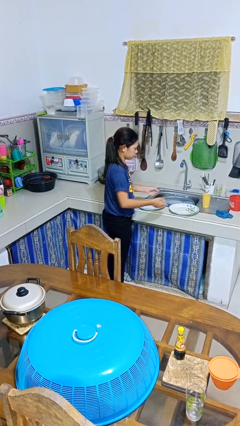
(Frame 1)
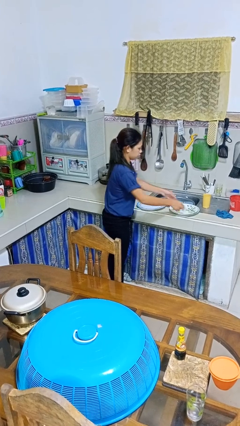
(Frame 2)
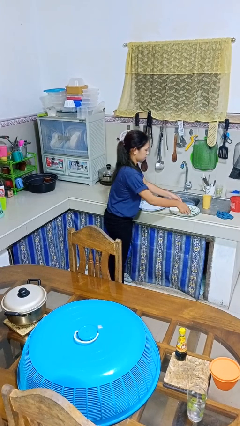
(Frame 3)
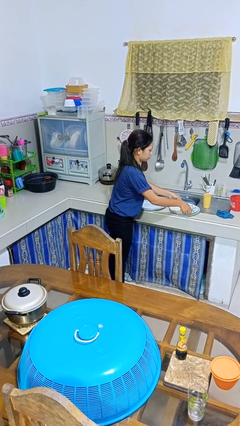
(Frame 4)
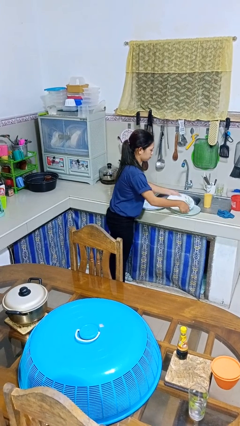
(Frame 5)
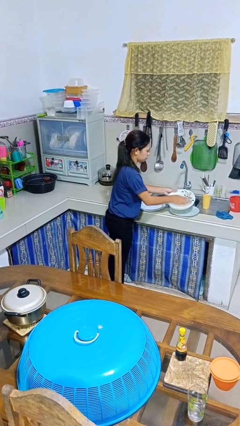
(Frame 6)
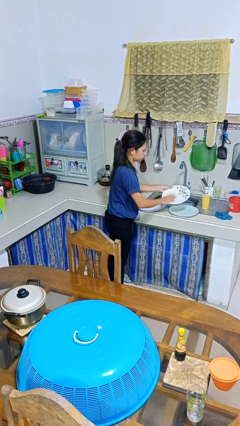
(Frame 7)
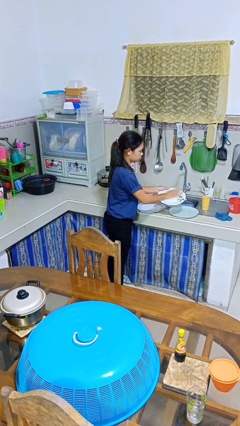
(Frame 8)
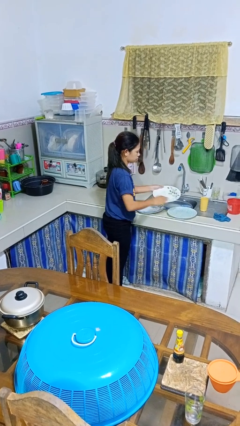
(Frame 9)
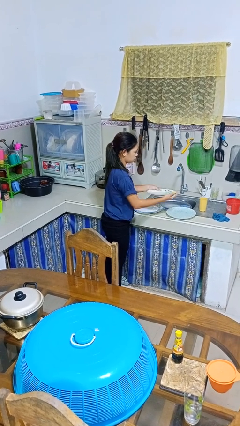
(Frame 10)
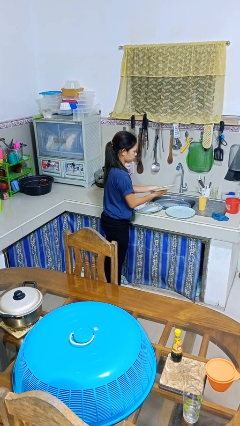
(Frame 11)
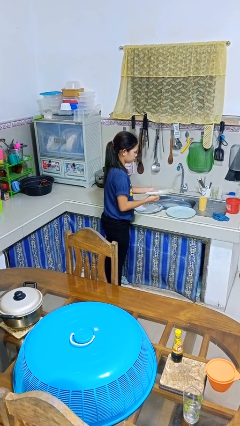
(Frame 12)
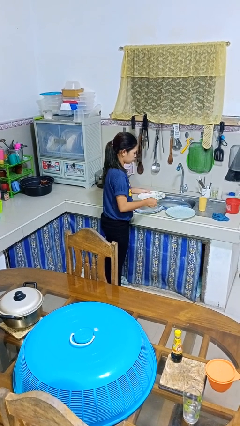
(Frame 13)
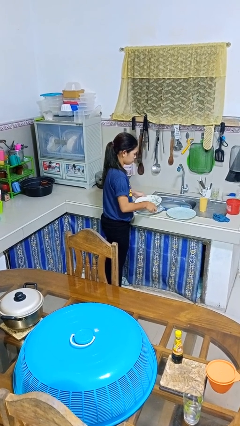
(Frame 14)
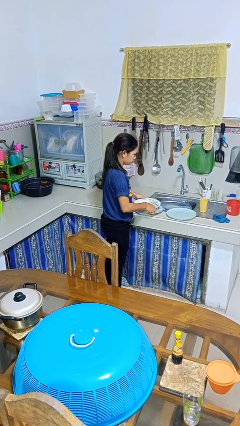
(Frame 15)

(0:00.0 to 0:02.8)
person washes dish

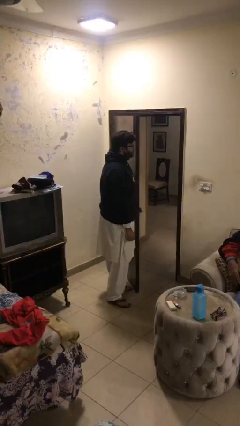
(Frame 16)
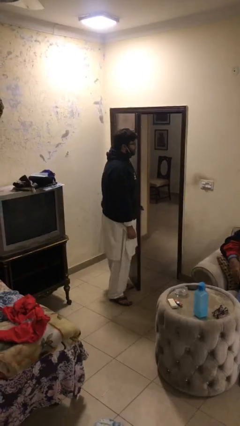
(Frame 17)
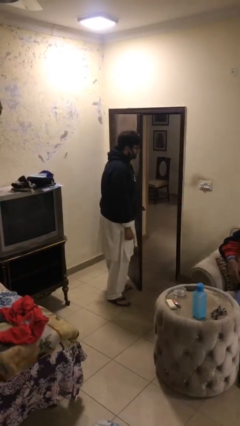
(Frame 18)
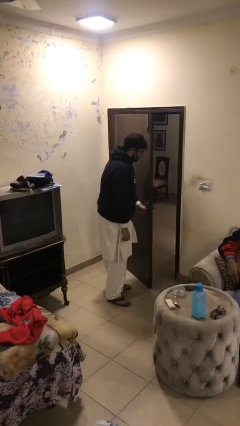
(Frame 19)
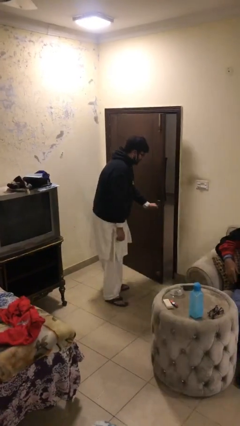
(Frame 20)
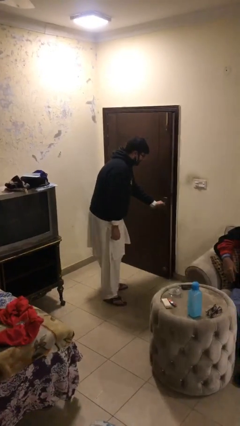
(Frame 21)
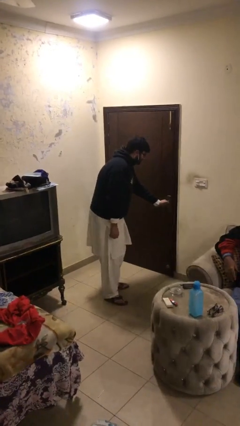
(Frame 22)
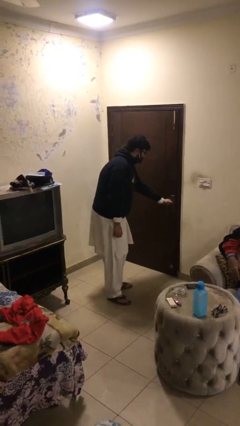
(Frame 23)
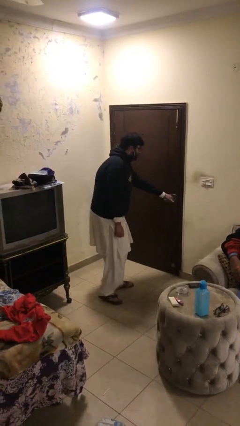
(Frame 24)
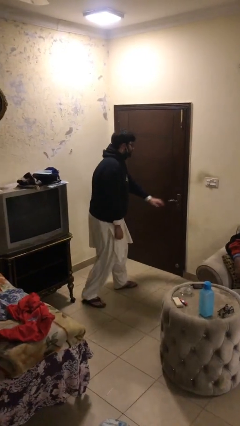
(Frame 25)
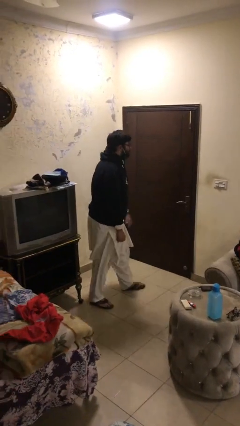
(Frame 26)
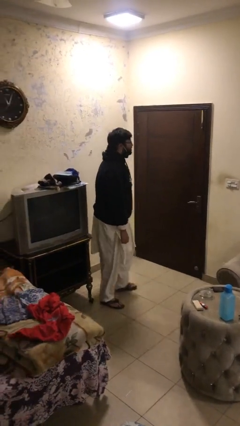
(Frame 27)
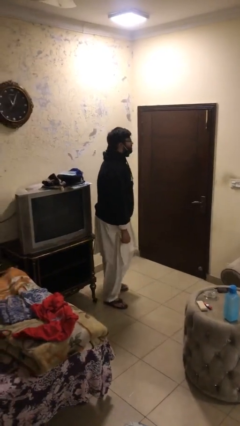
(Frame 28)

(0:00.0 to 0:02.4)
person closes facility door

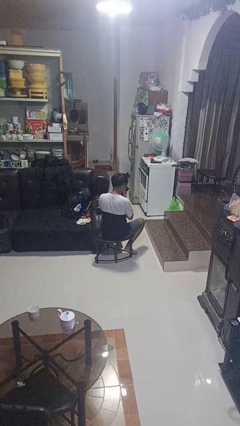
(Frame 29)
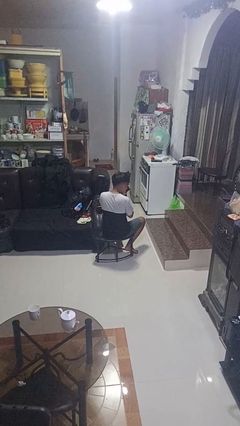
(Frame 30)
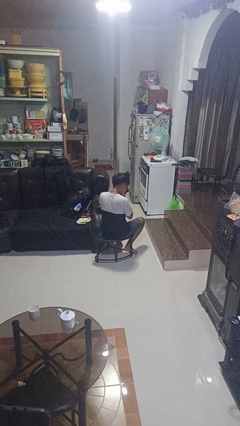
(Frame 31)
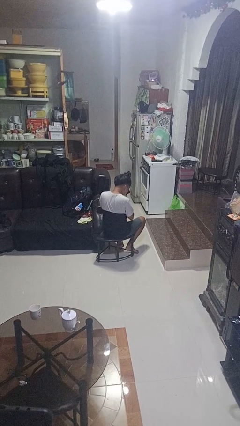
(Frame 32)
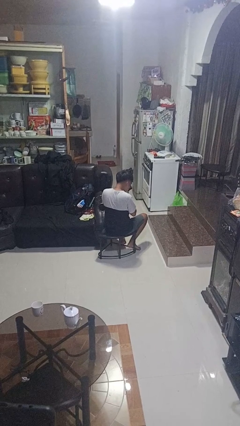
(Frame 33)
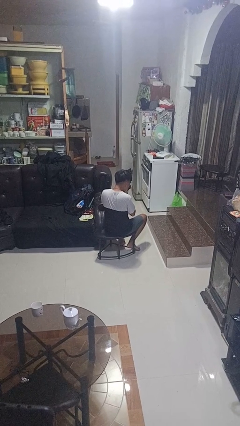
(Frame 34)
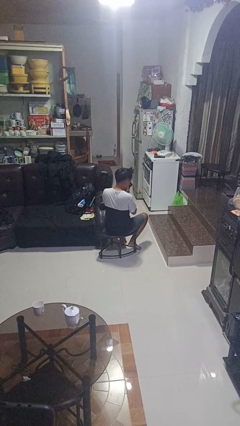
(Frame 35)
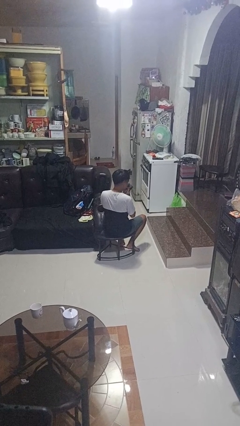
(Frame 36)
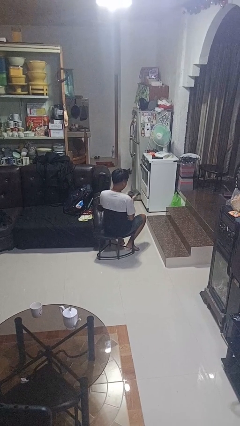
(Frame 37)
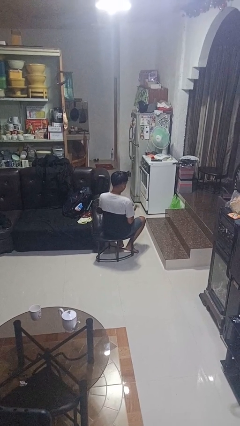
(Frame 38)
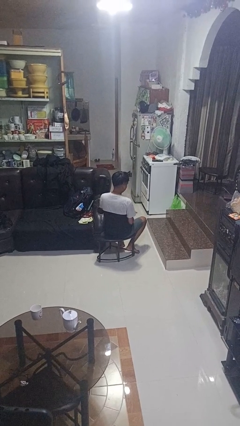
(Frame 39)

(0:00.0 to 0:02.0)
person blows nose

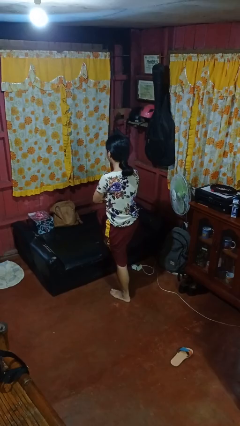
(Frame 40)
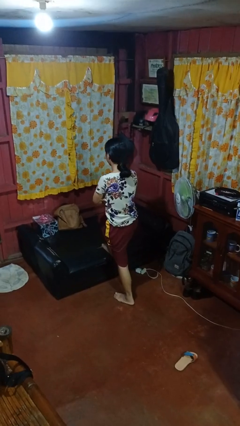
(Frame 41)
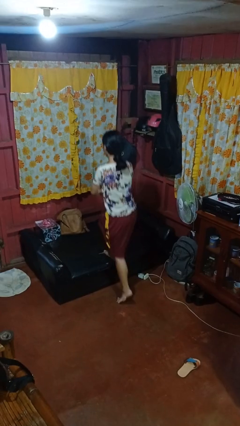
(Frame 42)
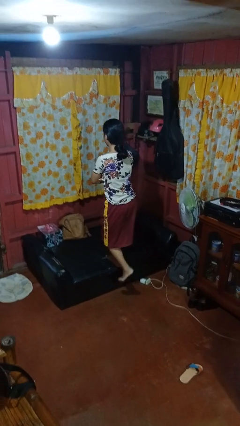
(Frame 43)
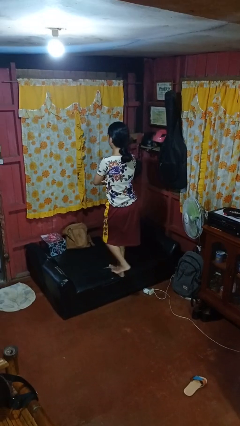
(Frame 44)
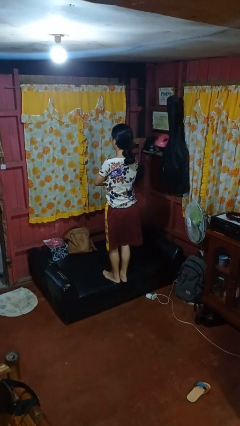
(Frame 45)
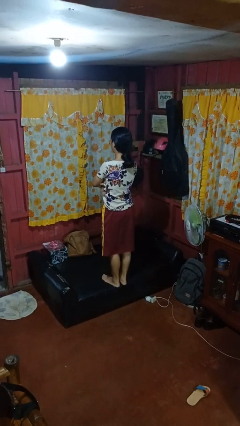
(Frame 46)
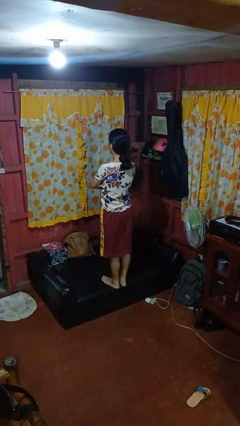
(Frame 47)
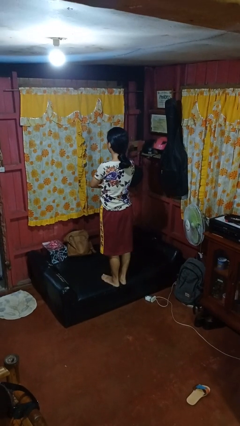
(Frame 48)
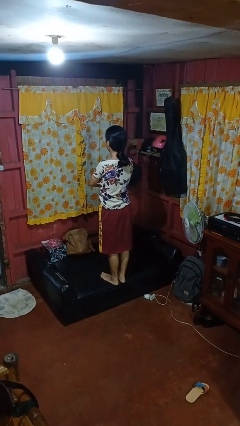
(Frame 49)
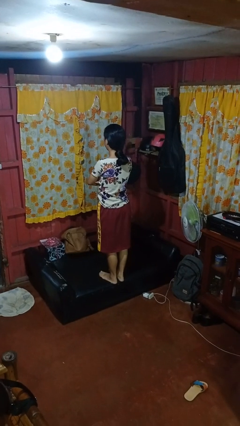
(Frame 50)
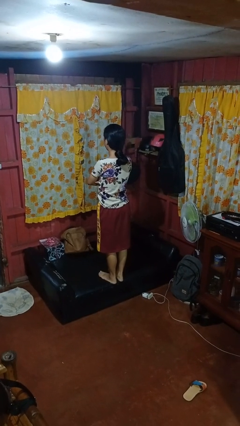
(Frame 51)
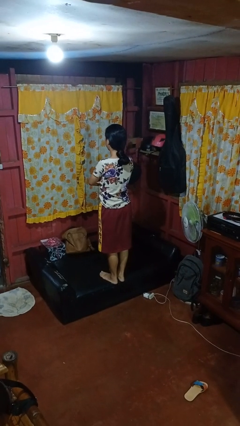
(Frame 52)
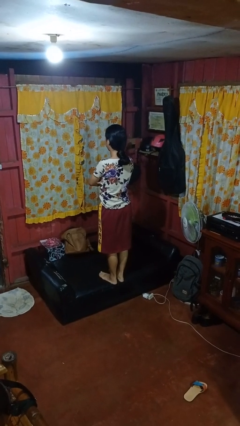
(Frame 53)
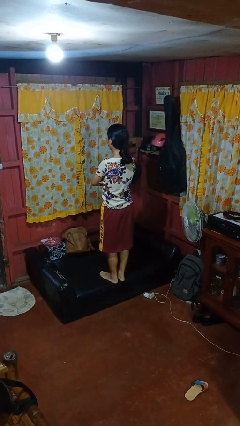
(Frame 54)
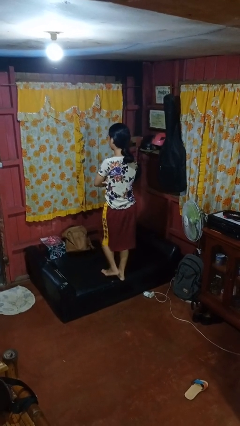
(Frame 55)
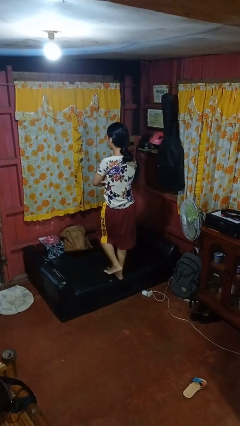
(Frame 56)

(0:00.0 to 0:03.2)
person climbs on couch

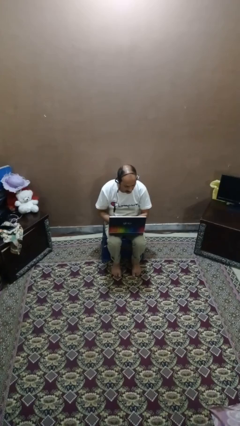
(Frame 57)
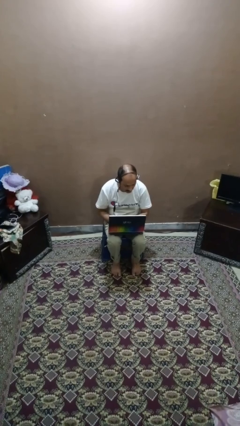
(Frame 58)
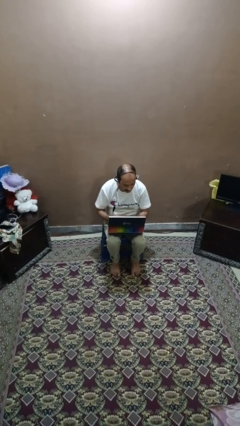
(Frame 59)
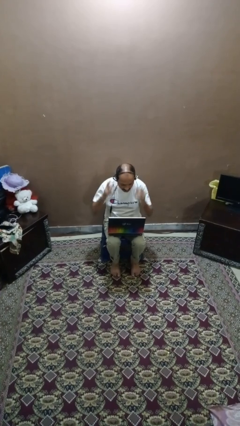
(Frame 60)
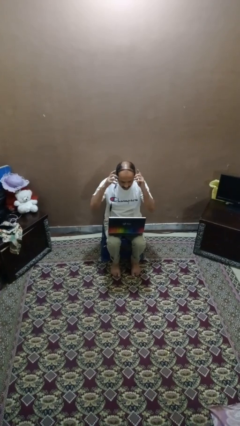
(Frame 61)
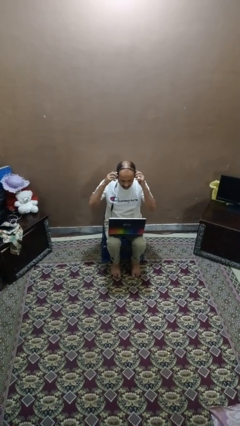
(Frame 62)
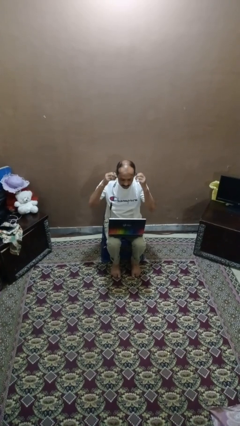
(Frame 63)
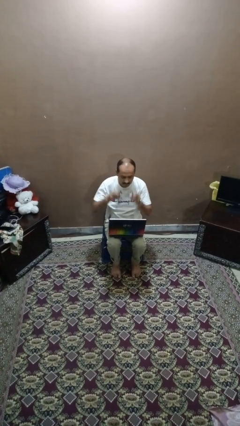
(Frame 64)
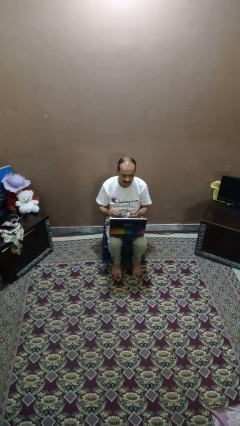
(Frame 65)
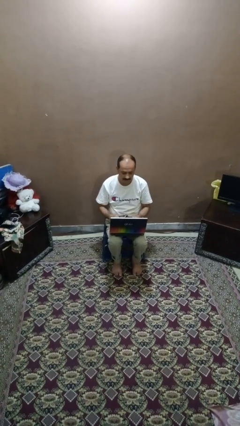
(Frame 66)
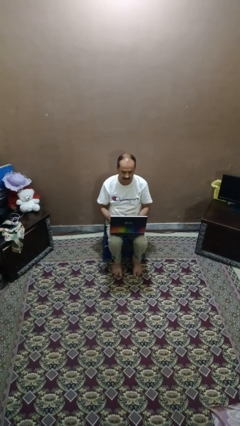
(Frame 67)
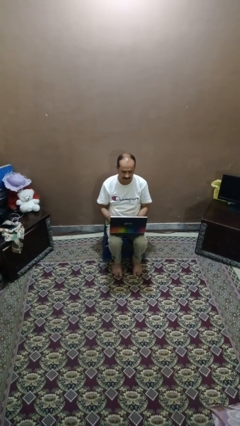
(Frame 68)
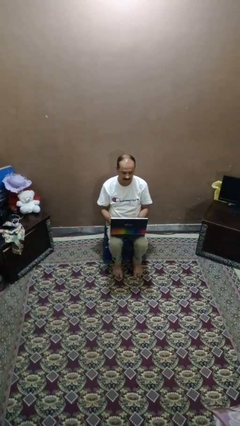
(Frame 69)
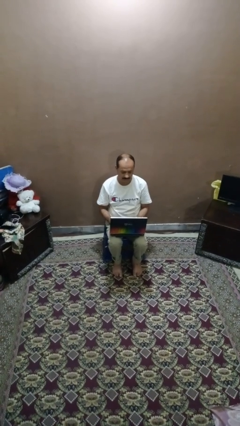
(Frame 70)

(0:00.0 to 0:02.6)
person takes off headphones

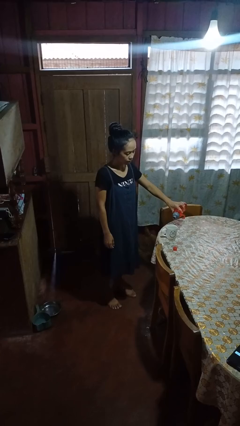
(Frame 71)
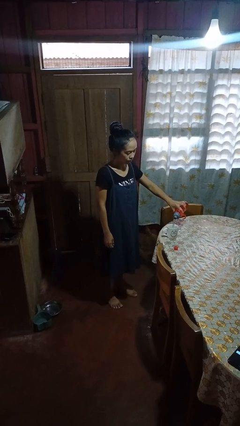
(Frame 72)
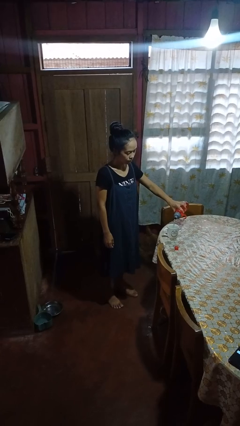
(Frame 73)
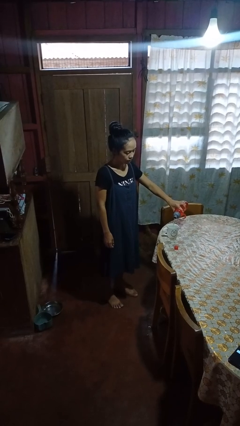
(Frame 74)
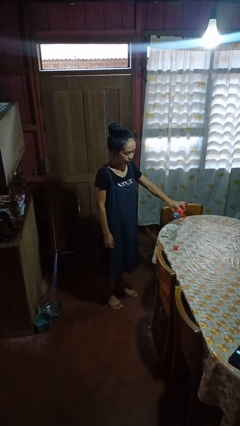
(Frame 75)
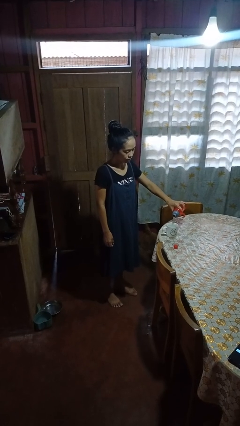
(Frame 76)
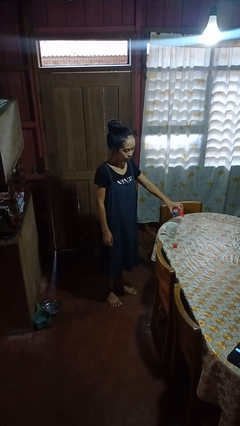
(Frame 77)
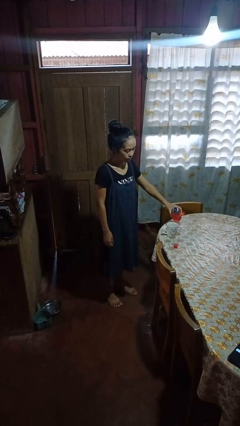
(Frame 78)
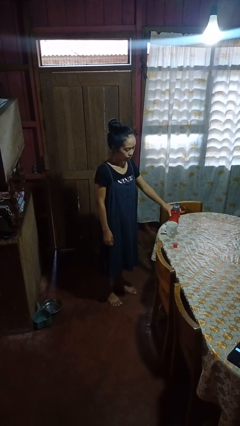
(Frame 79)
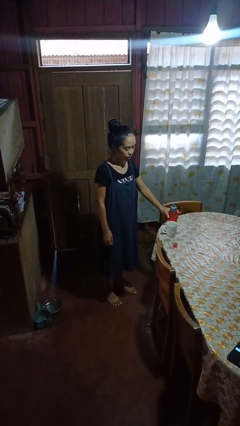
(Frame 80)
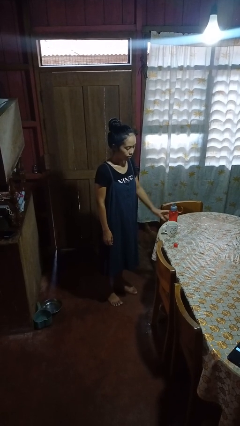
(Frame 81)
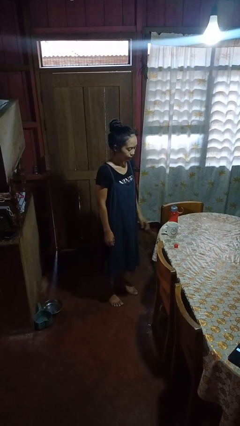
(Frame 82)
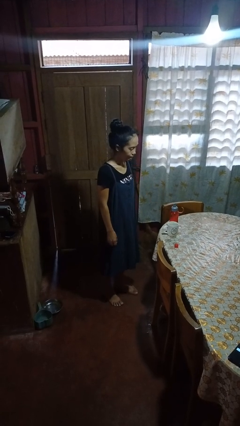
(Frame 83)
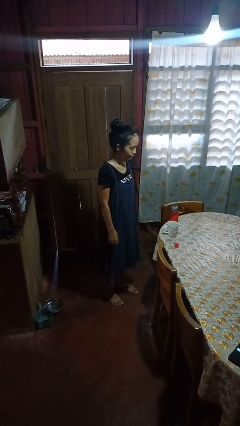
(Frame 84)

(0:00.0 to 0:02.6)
person pours liquid into cup

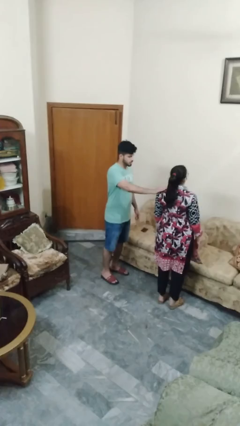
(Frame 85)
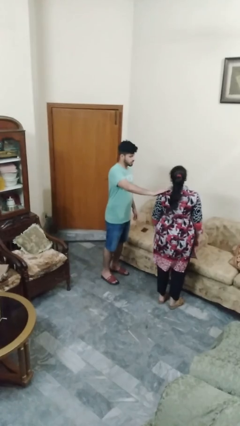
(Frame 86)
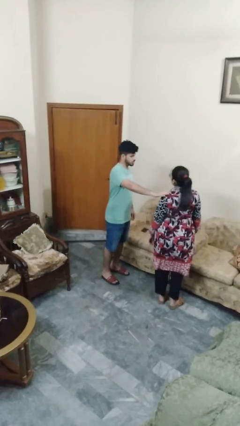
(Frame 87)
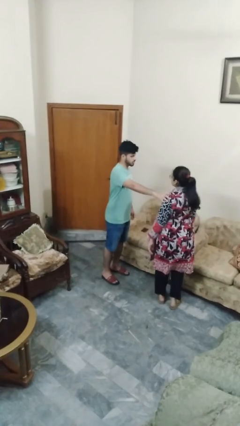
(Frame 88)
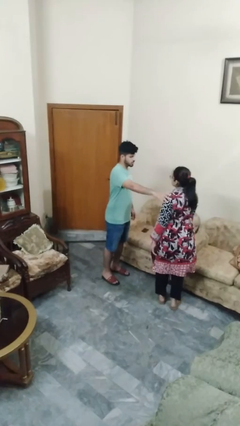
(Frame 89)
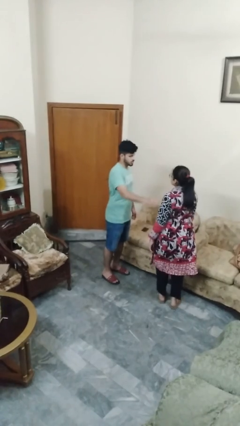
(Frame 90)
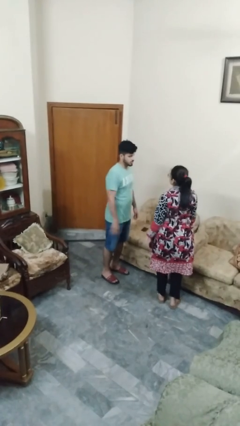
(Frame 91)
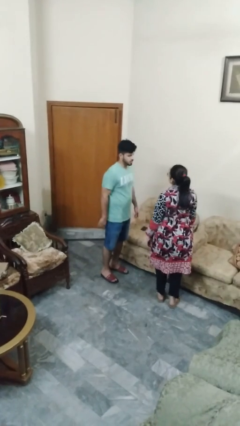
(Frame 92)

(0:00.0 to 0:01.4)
person spins person around
